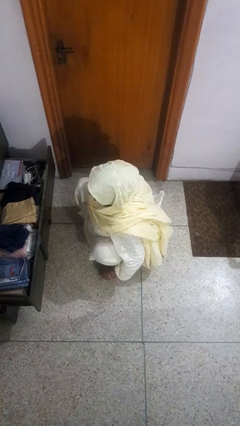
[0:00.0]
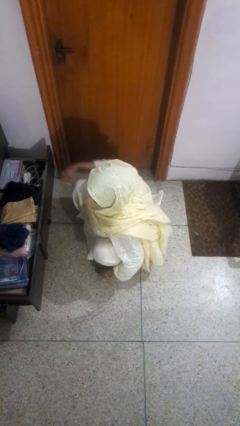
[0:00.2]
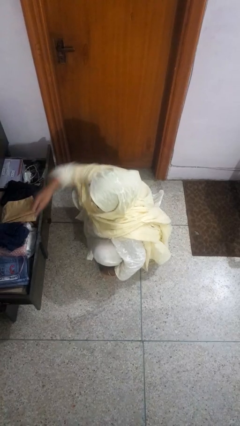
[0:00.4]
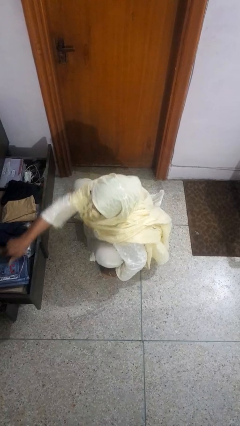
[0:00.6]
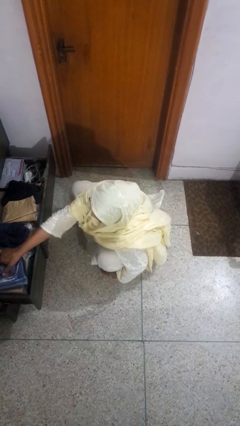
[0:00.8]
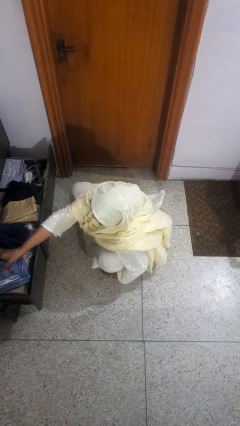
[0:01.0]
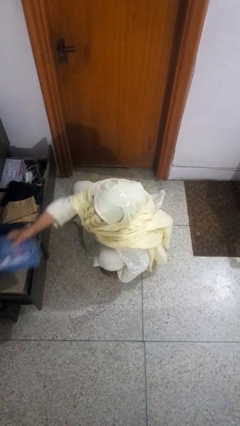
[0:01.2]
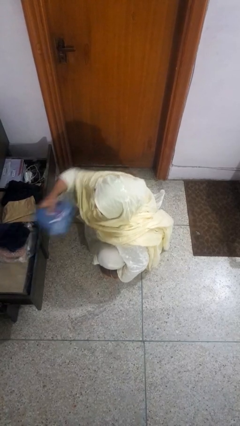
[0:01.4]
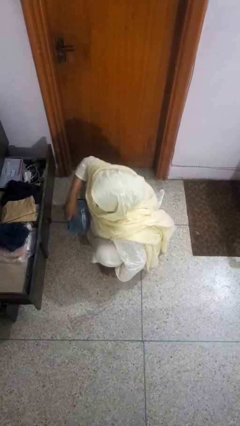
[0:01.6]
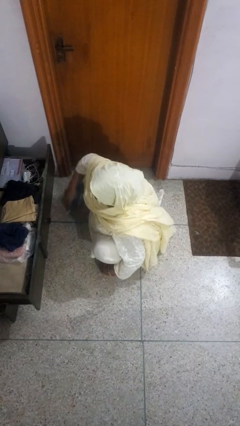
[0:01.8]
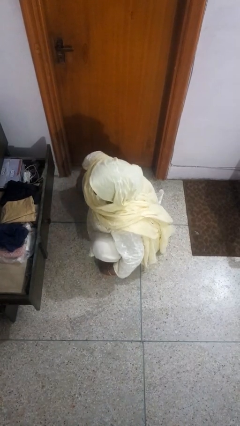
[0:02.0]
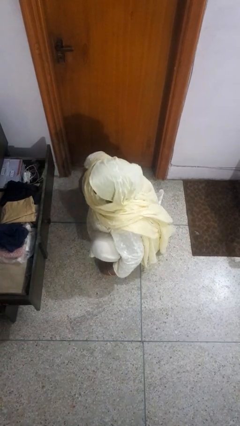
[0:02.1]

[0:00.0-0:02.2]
person takes clothes from dresser

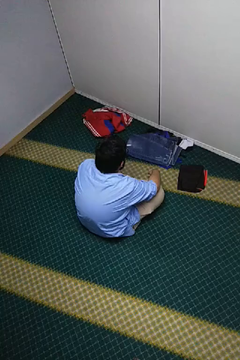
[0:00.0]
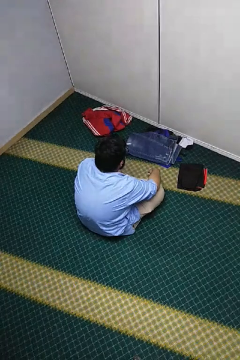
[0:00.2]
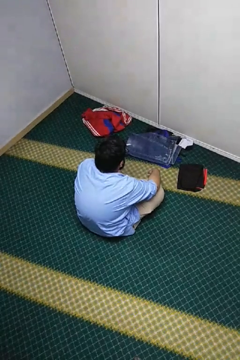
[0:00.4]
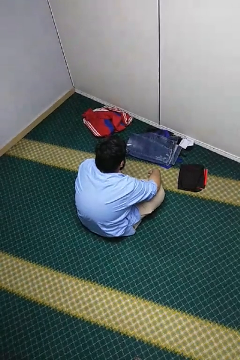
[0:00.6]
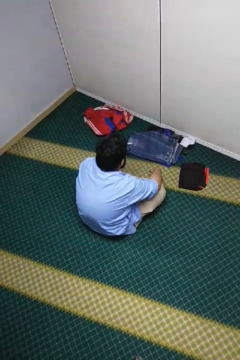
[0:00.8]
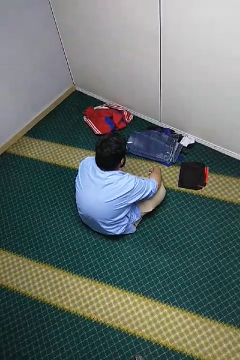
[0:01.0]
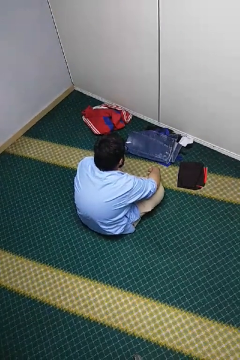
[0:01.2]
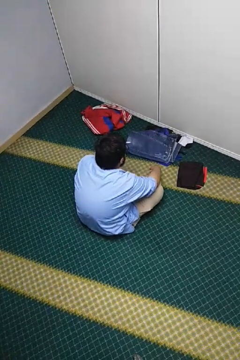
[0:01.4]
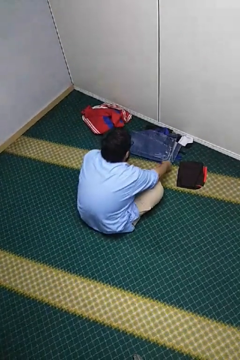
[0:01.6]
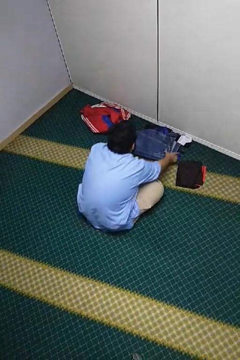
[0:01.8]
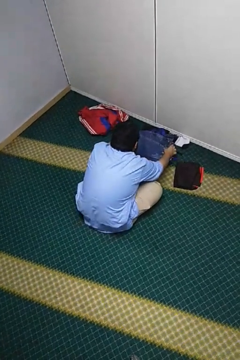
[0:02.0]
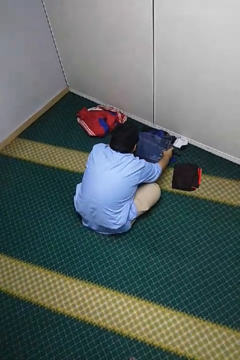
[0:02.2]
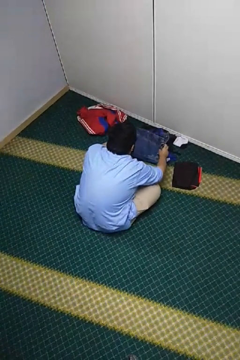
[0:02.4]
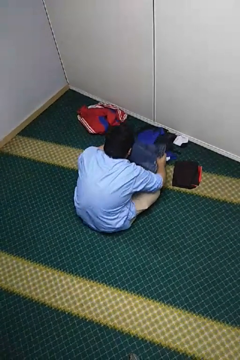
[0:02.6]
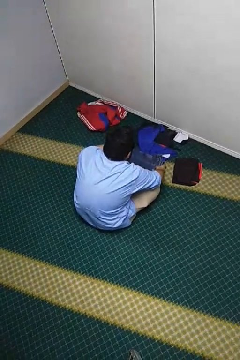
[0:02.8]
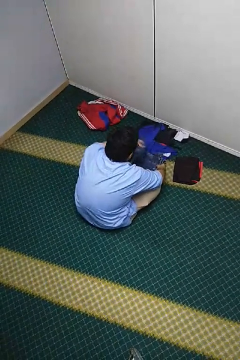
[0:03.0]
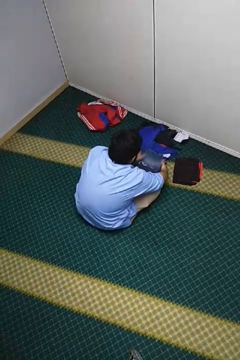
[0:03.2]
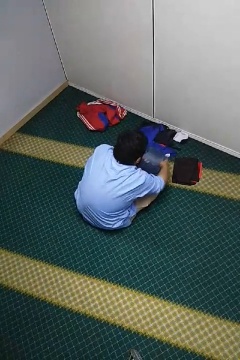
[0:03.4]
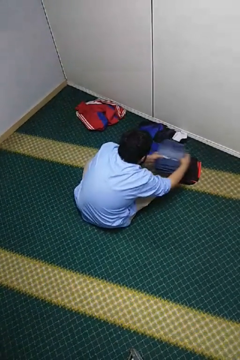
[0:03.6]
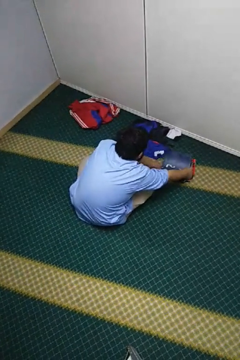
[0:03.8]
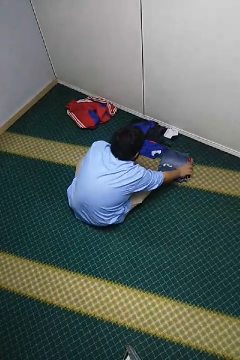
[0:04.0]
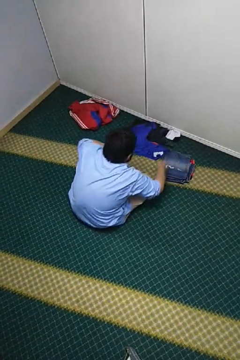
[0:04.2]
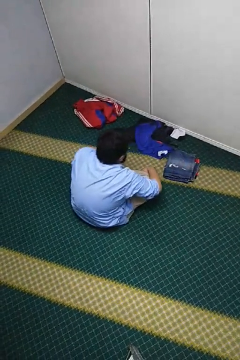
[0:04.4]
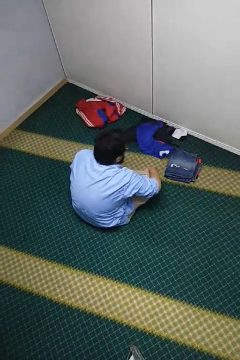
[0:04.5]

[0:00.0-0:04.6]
person folds pants

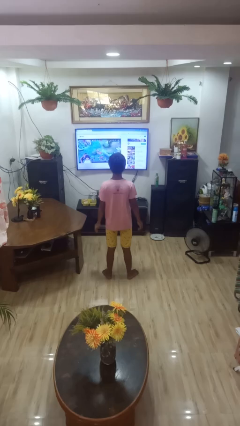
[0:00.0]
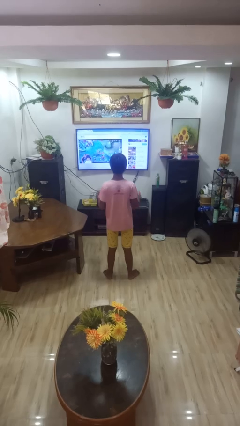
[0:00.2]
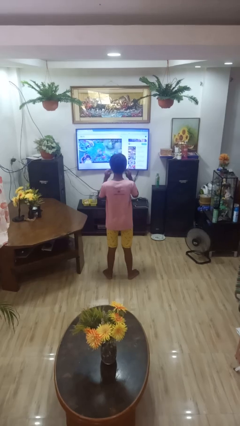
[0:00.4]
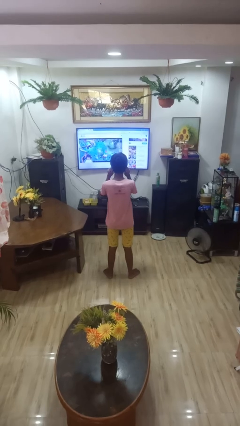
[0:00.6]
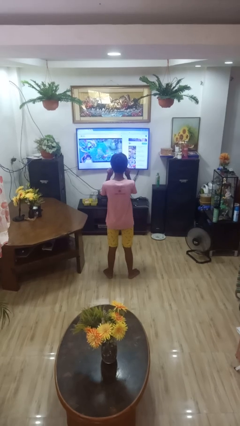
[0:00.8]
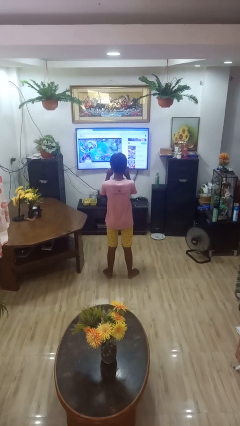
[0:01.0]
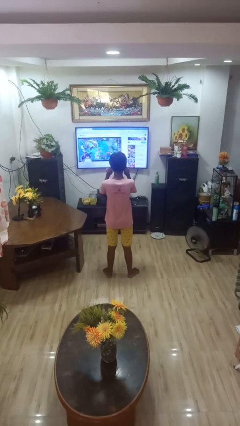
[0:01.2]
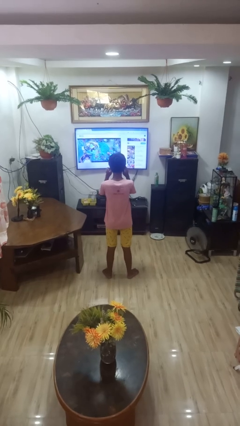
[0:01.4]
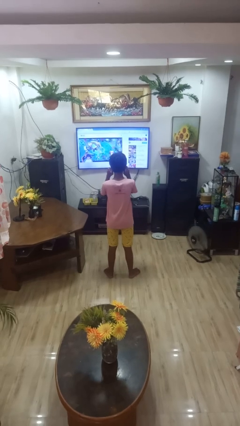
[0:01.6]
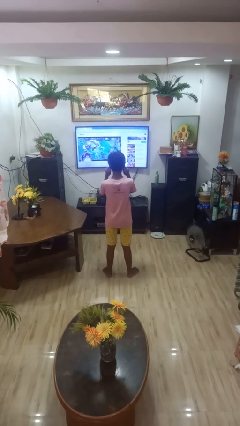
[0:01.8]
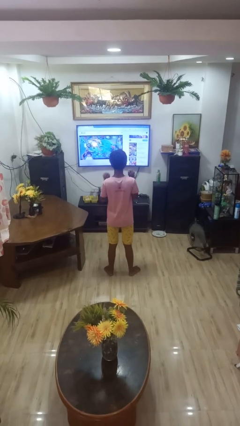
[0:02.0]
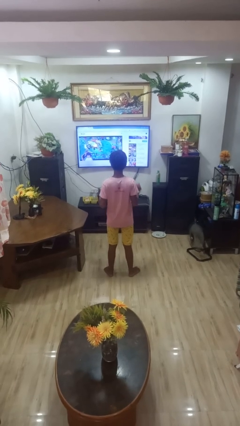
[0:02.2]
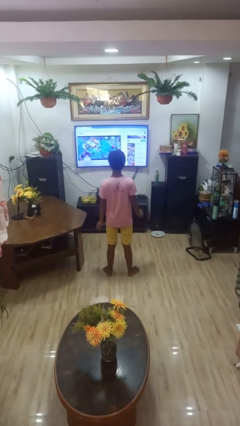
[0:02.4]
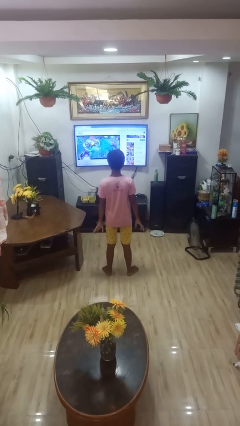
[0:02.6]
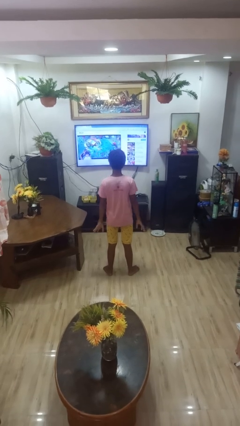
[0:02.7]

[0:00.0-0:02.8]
person touches earlobe

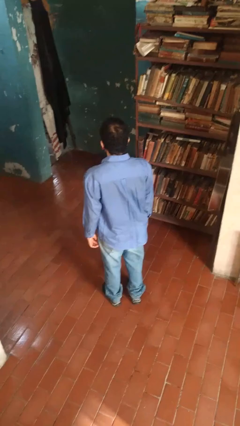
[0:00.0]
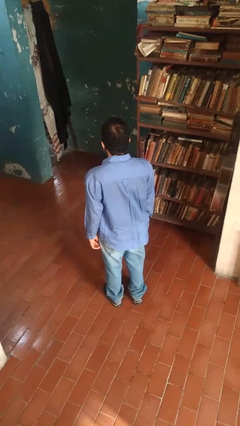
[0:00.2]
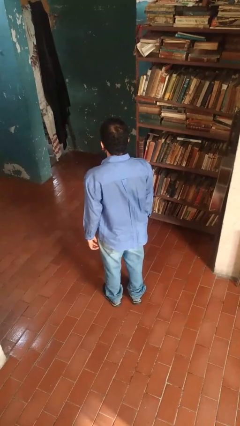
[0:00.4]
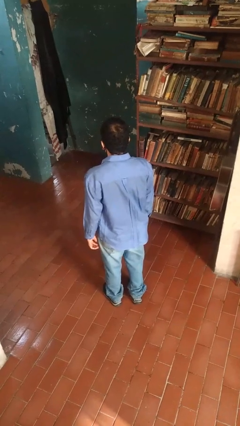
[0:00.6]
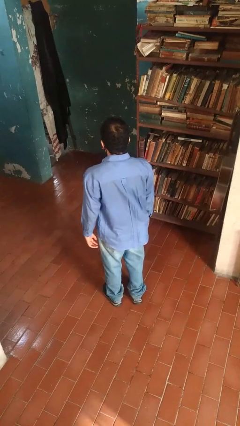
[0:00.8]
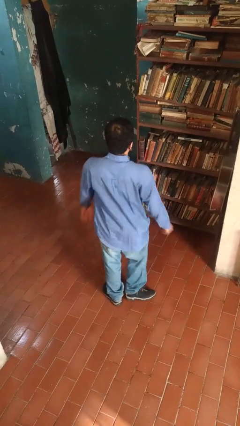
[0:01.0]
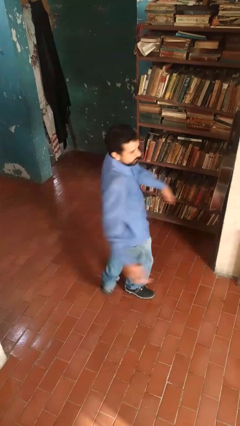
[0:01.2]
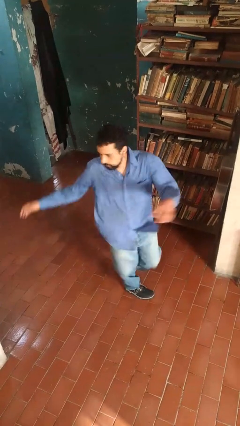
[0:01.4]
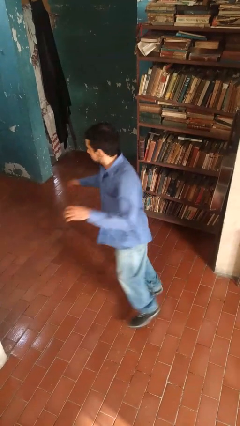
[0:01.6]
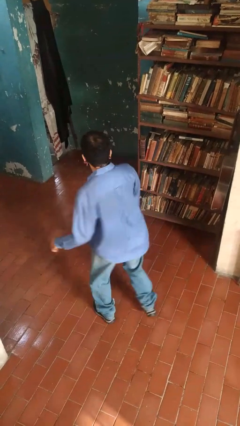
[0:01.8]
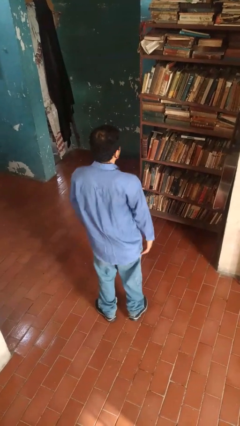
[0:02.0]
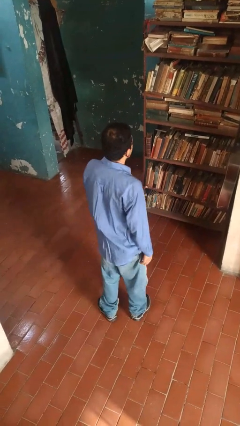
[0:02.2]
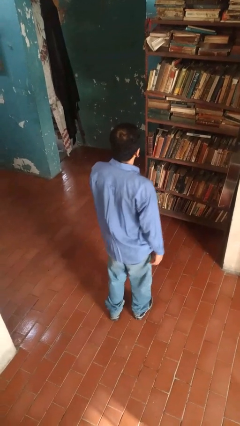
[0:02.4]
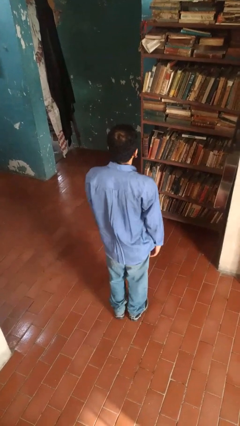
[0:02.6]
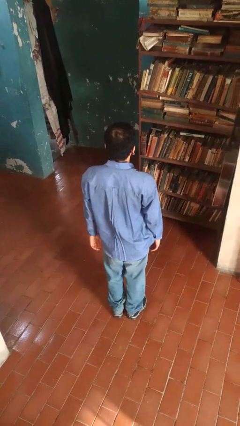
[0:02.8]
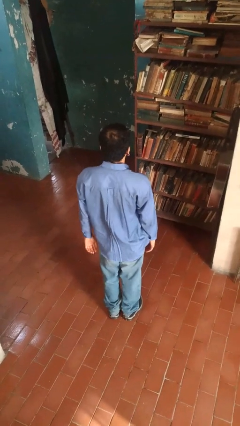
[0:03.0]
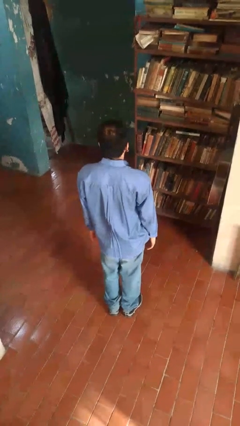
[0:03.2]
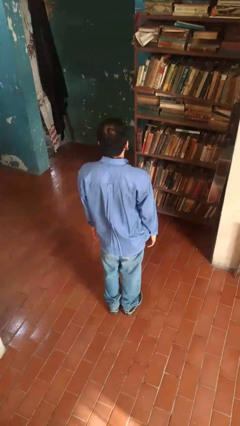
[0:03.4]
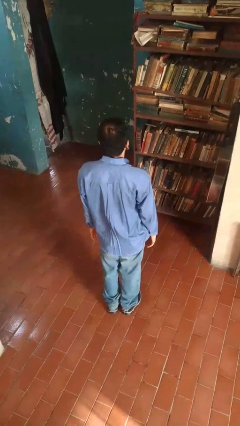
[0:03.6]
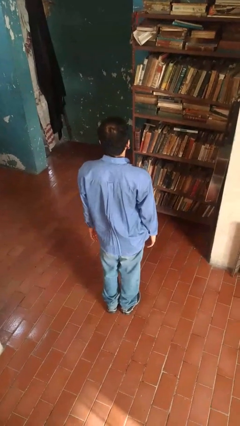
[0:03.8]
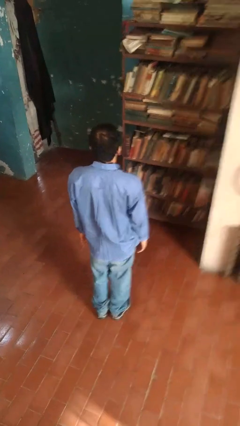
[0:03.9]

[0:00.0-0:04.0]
person twirls

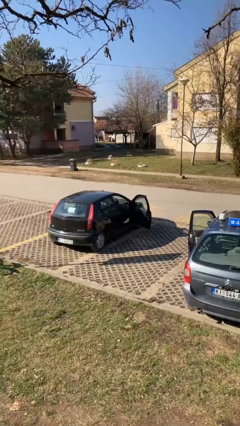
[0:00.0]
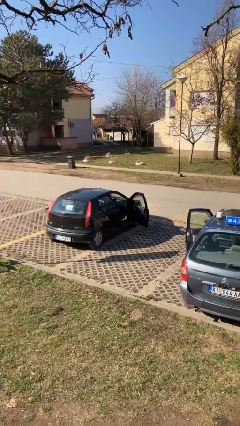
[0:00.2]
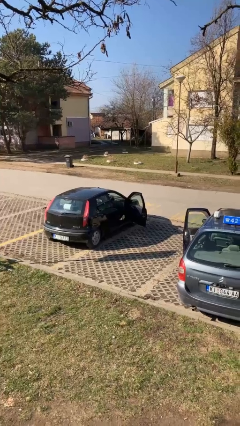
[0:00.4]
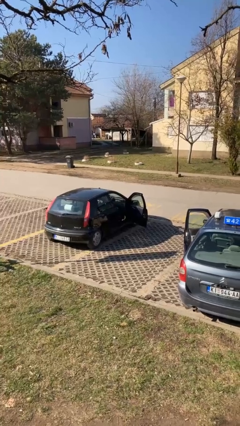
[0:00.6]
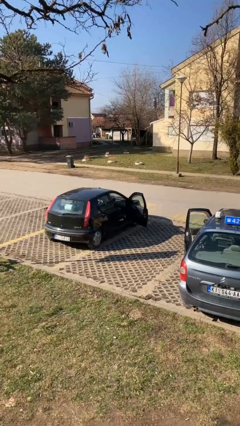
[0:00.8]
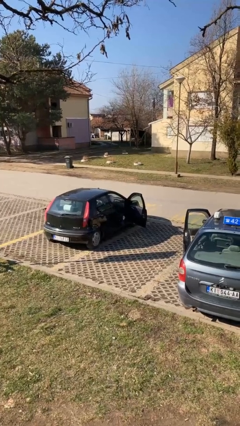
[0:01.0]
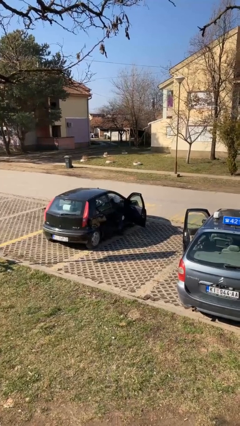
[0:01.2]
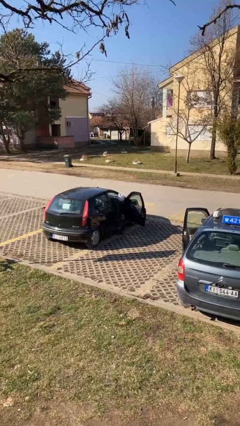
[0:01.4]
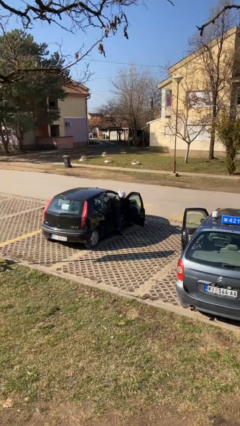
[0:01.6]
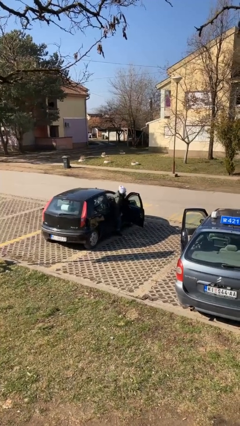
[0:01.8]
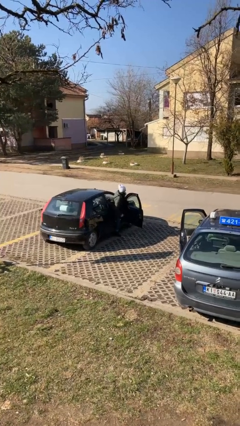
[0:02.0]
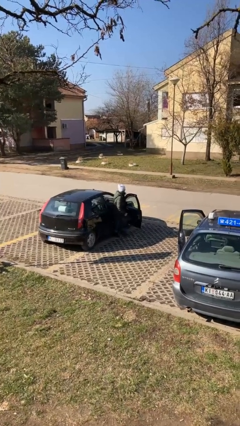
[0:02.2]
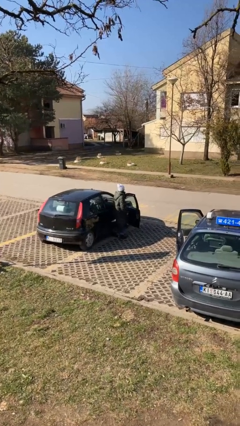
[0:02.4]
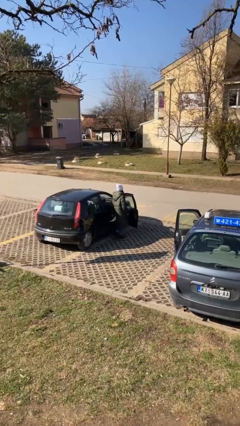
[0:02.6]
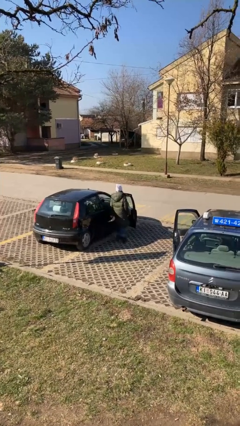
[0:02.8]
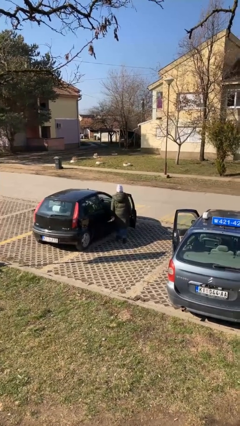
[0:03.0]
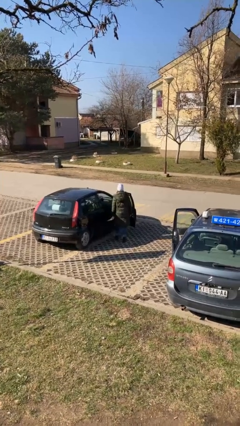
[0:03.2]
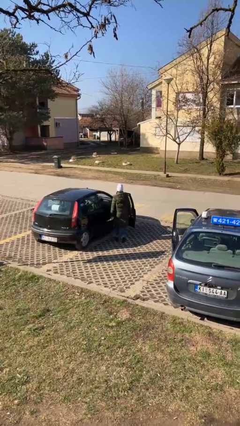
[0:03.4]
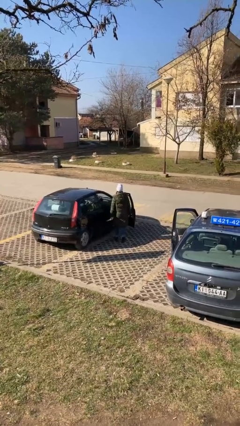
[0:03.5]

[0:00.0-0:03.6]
person exits car

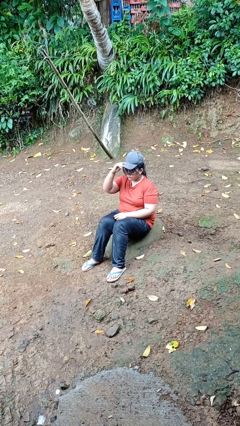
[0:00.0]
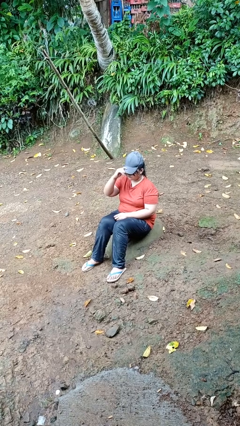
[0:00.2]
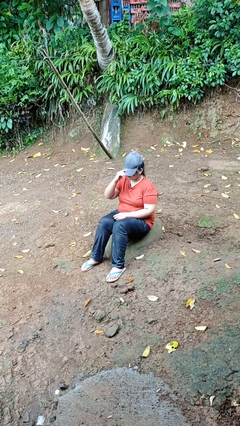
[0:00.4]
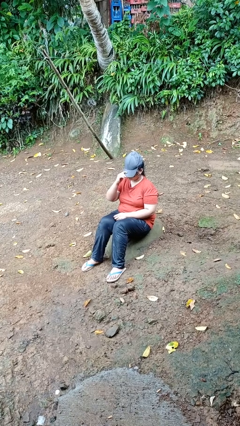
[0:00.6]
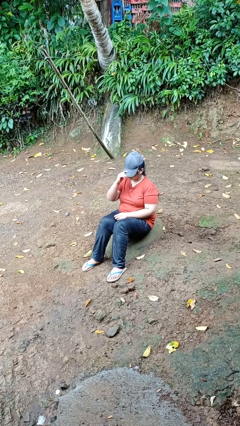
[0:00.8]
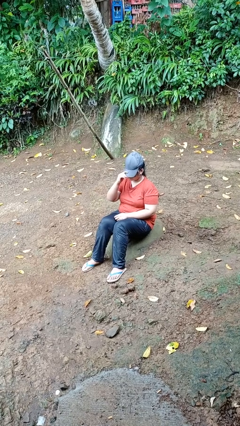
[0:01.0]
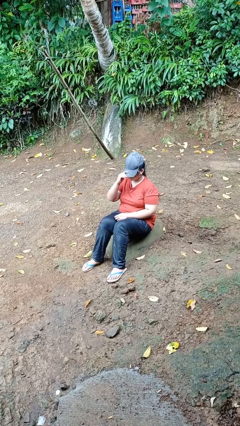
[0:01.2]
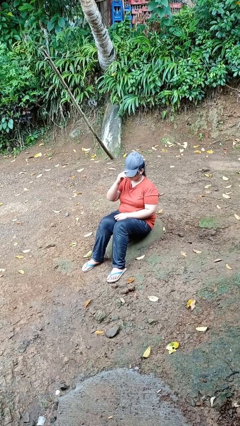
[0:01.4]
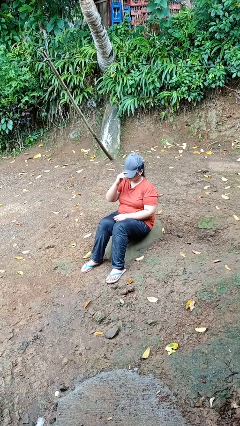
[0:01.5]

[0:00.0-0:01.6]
person puts on hat
